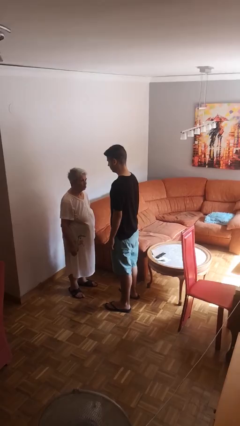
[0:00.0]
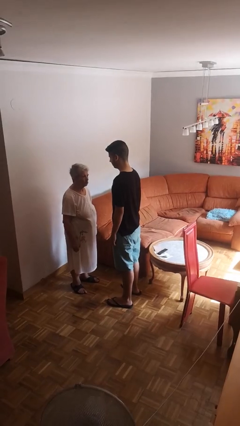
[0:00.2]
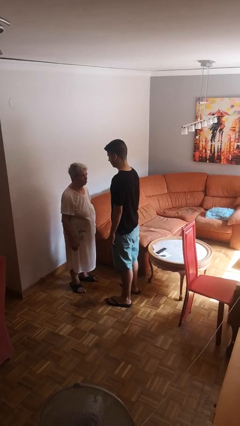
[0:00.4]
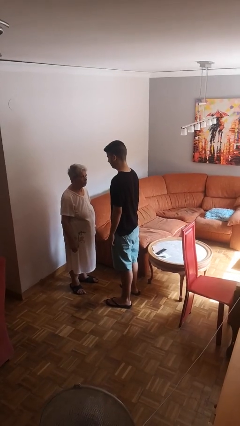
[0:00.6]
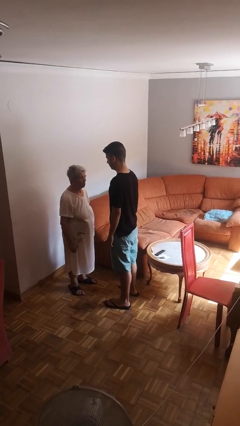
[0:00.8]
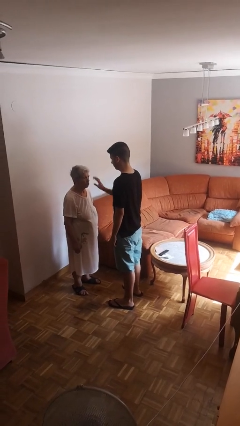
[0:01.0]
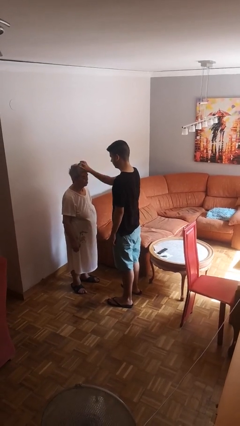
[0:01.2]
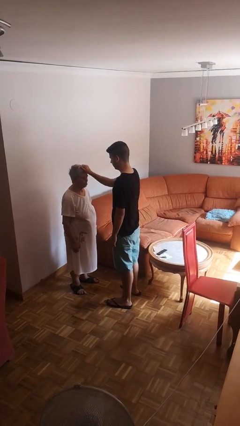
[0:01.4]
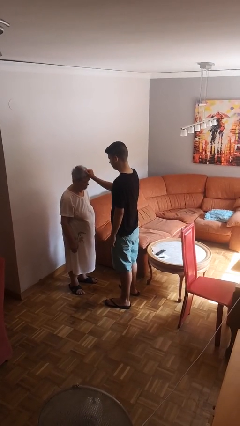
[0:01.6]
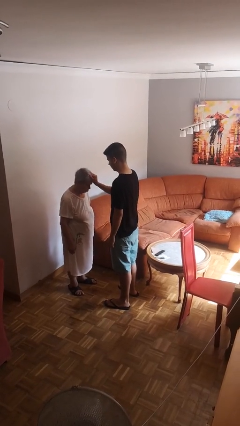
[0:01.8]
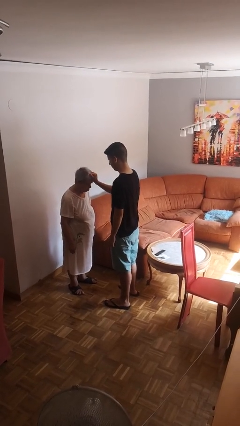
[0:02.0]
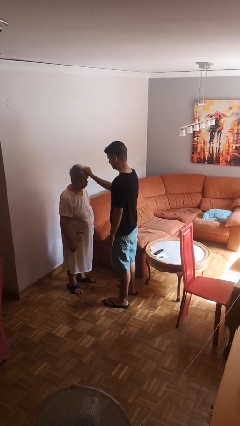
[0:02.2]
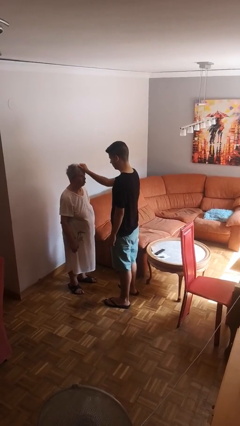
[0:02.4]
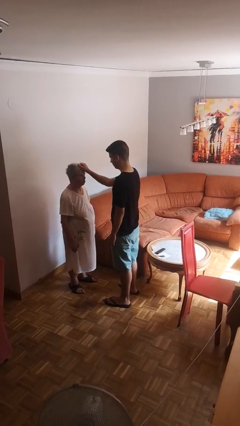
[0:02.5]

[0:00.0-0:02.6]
person grabs person by hair

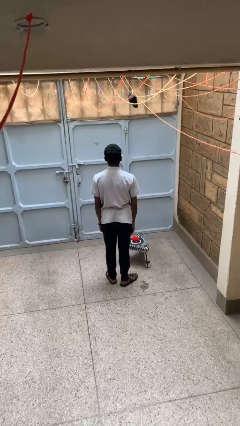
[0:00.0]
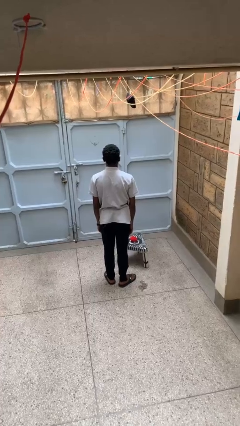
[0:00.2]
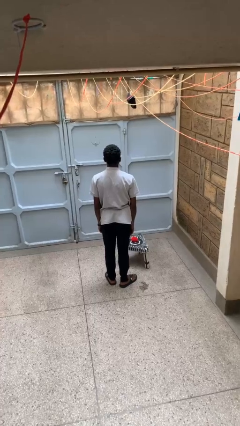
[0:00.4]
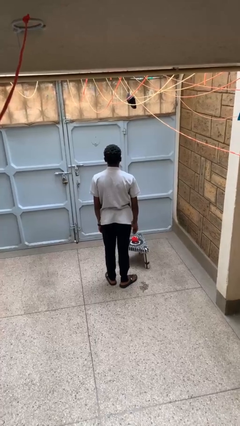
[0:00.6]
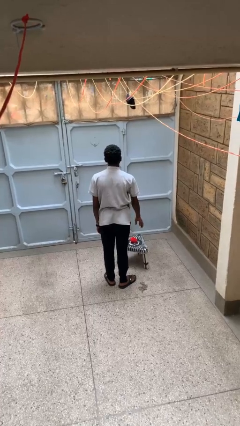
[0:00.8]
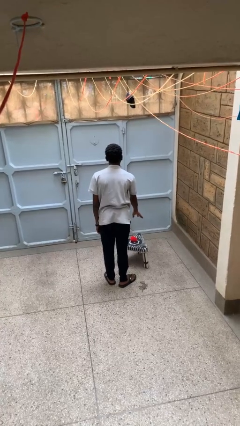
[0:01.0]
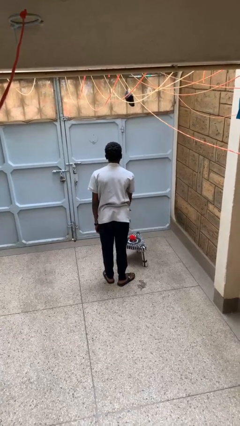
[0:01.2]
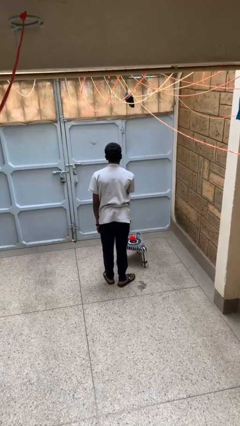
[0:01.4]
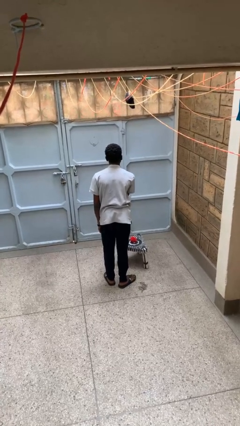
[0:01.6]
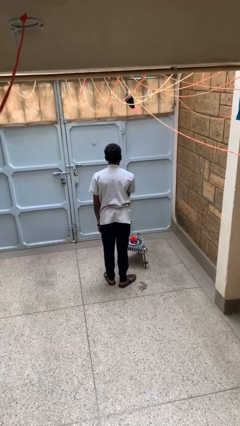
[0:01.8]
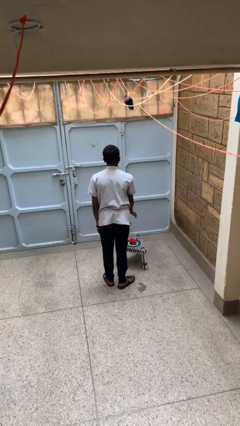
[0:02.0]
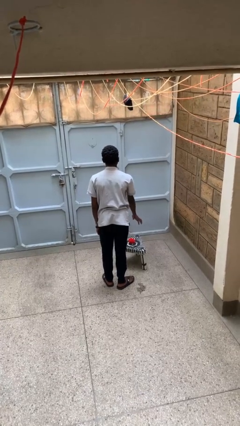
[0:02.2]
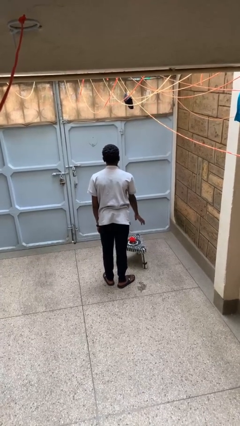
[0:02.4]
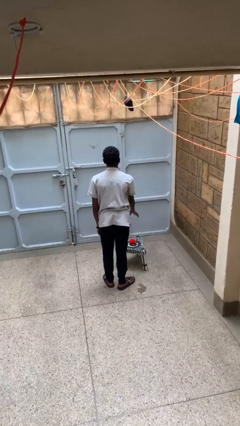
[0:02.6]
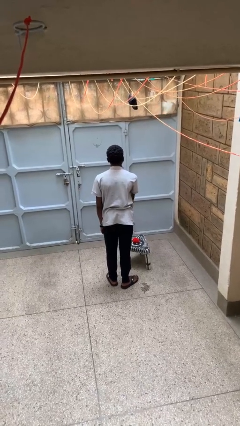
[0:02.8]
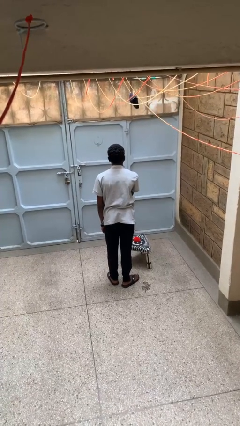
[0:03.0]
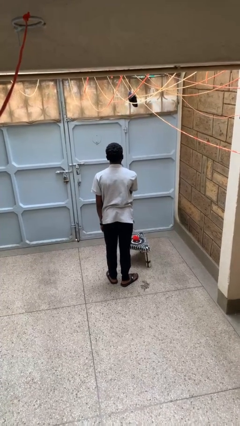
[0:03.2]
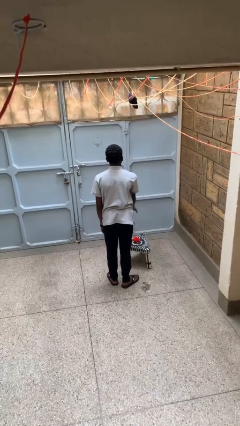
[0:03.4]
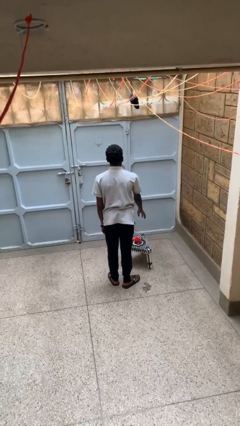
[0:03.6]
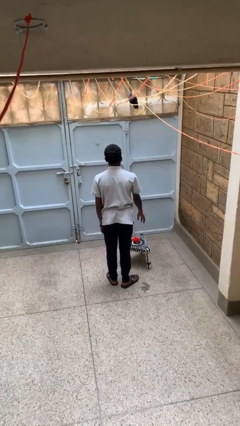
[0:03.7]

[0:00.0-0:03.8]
person waves hand over object

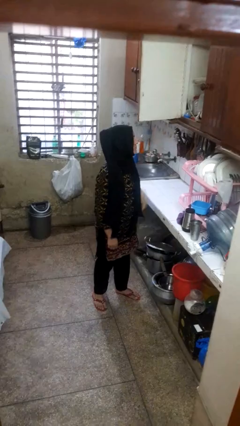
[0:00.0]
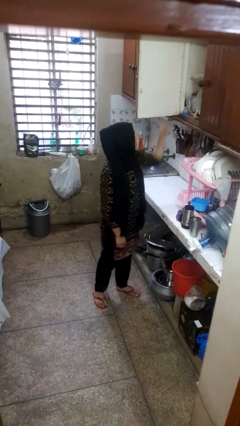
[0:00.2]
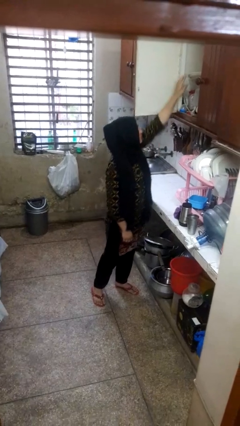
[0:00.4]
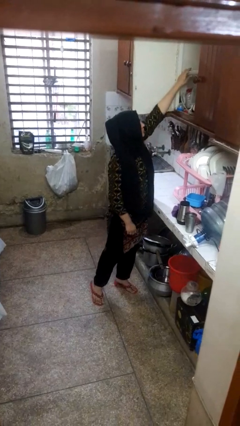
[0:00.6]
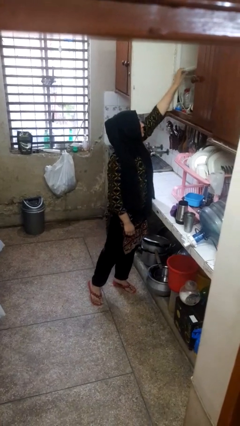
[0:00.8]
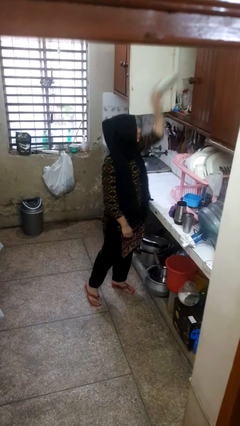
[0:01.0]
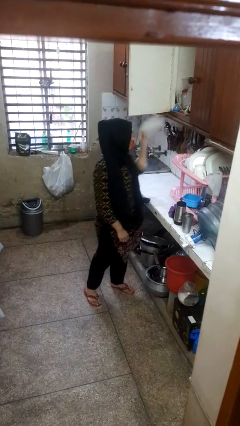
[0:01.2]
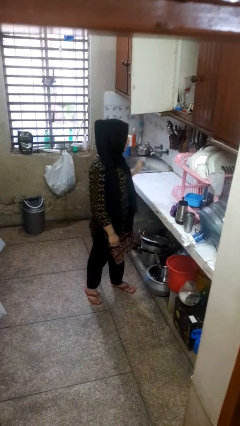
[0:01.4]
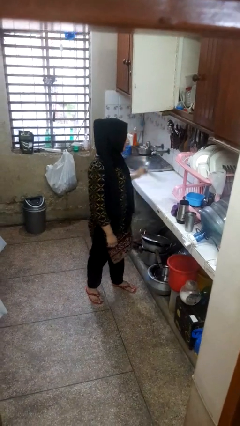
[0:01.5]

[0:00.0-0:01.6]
person takes object from cabinet

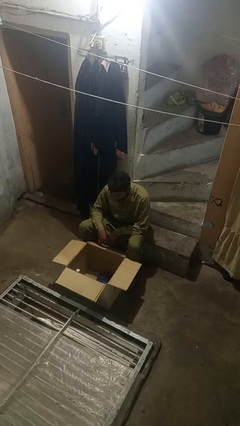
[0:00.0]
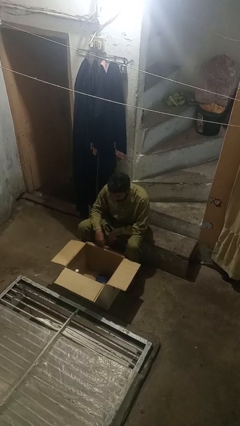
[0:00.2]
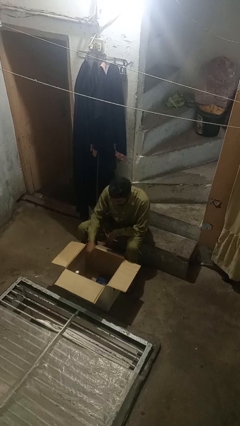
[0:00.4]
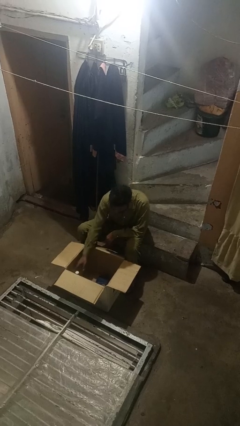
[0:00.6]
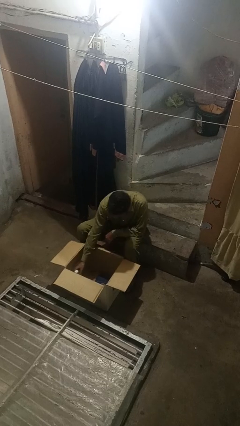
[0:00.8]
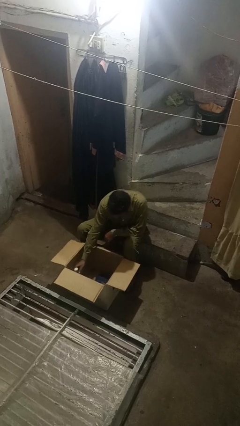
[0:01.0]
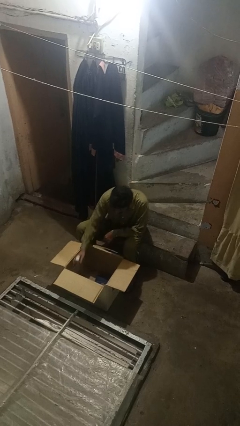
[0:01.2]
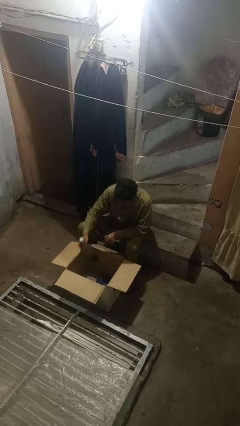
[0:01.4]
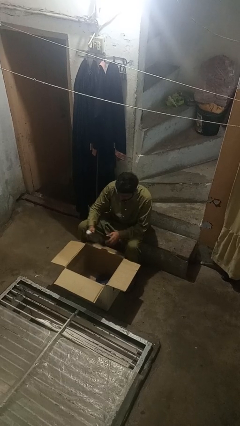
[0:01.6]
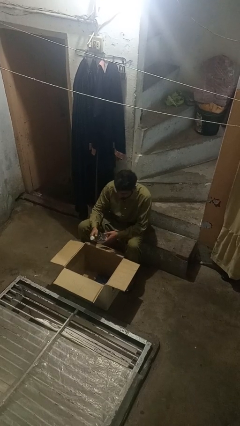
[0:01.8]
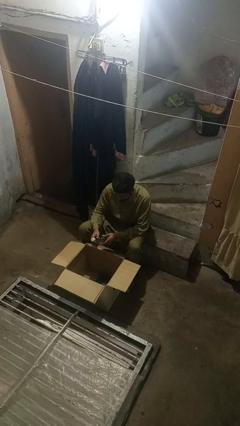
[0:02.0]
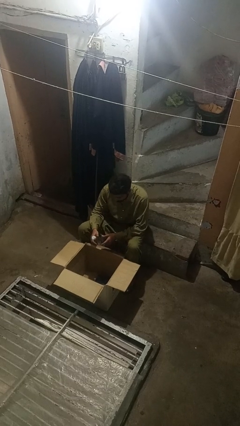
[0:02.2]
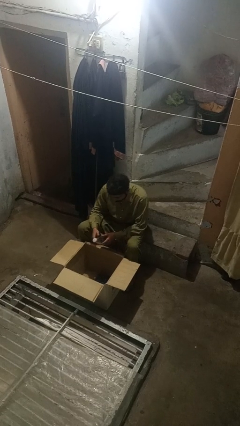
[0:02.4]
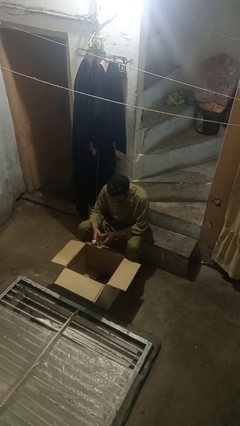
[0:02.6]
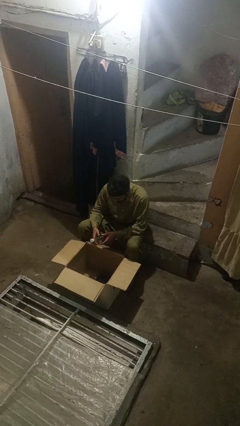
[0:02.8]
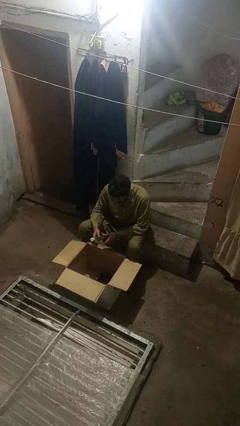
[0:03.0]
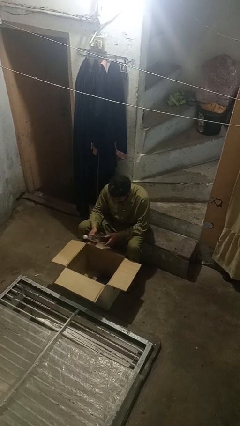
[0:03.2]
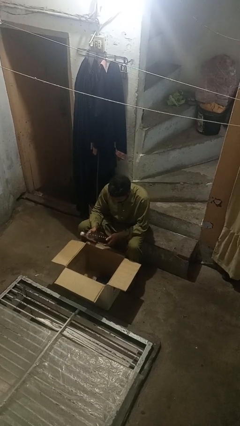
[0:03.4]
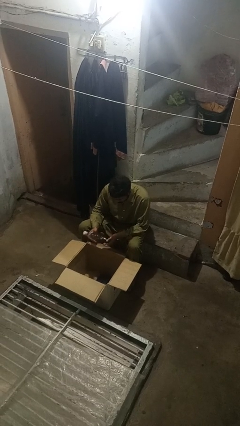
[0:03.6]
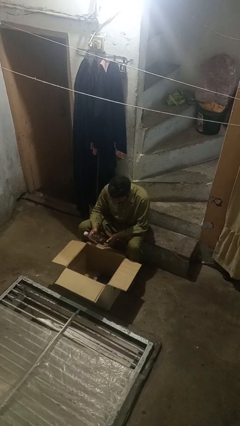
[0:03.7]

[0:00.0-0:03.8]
person takes object from box

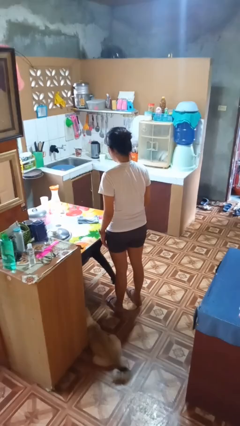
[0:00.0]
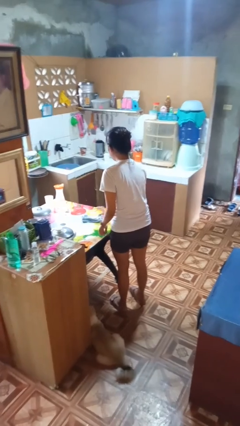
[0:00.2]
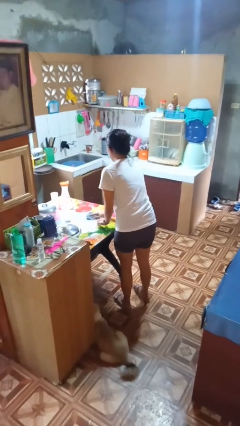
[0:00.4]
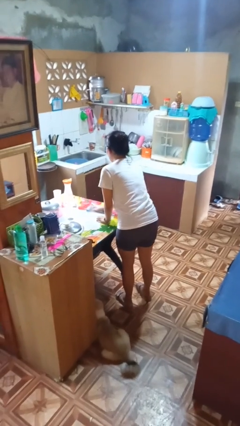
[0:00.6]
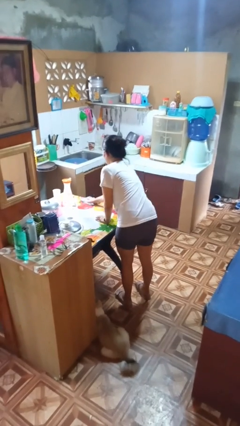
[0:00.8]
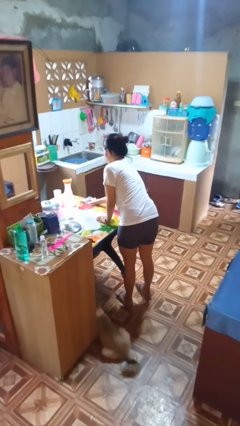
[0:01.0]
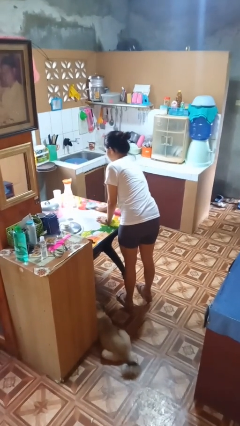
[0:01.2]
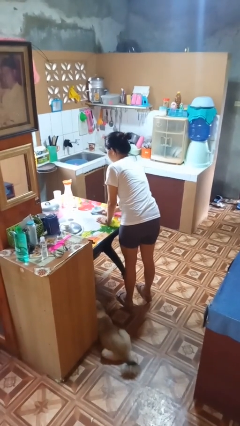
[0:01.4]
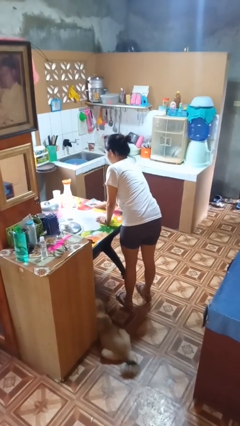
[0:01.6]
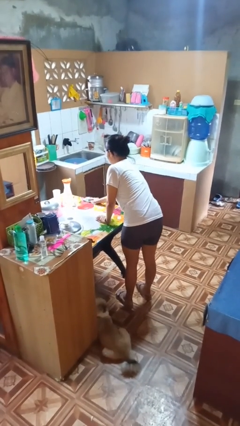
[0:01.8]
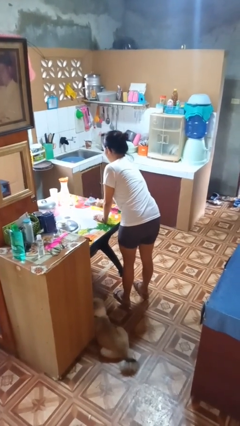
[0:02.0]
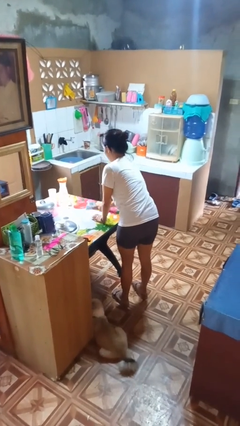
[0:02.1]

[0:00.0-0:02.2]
person cleans table with rag

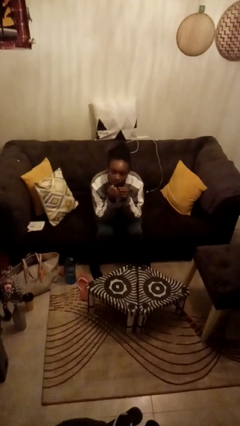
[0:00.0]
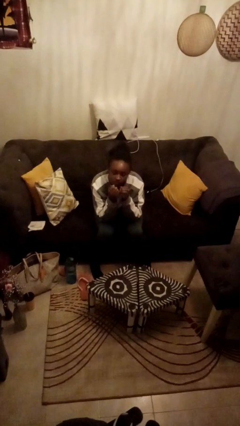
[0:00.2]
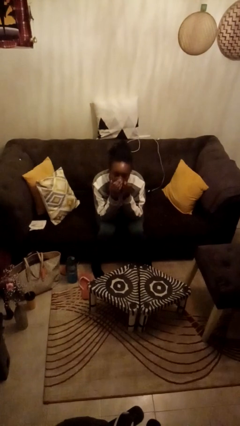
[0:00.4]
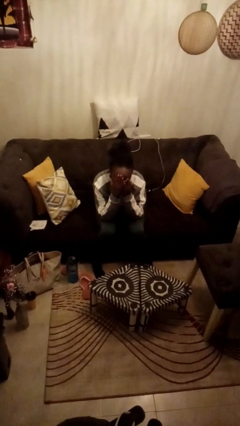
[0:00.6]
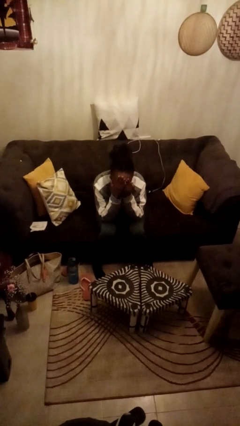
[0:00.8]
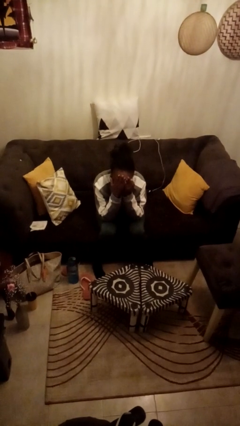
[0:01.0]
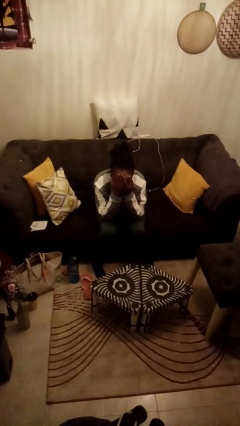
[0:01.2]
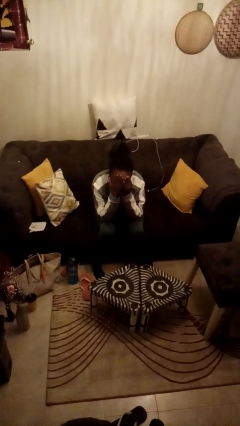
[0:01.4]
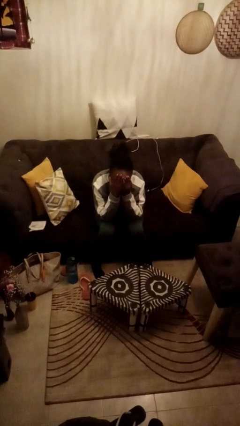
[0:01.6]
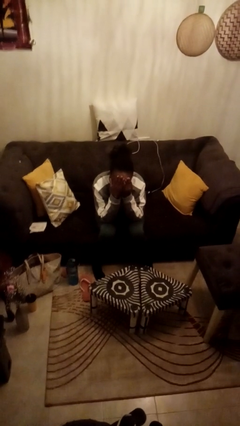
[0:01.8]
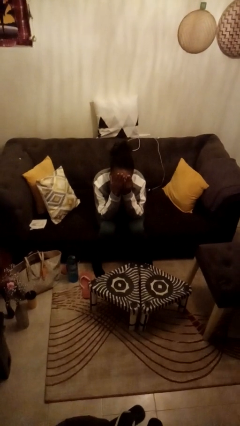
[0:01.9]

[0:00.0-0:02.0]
person covers face with hands

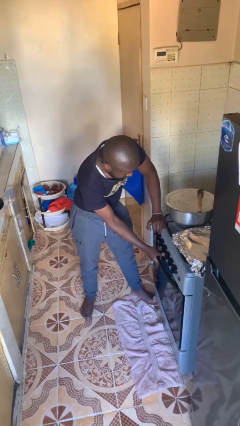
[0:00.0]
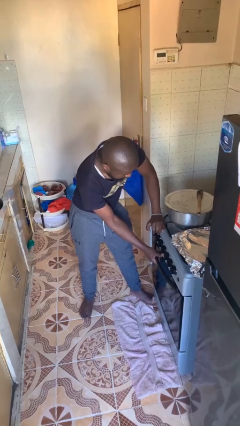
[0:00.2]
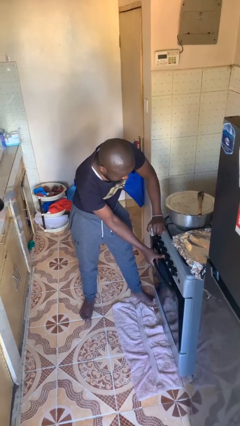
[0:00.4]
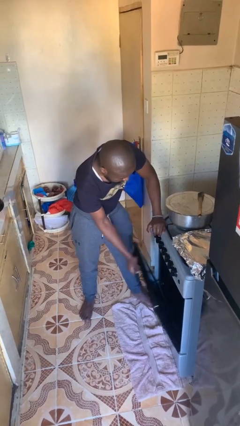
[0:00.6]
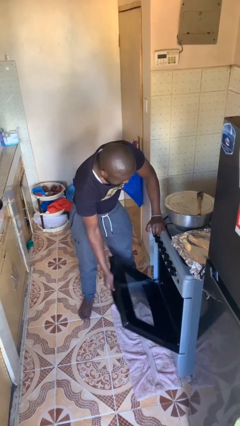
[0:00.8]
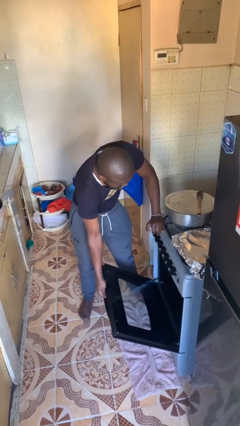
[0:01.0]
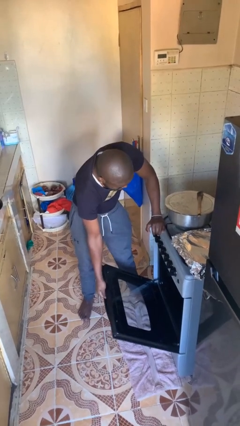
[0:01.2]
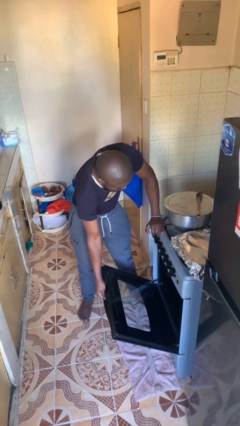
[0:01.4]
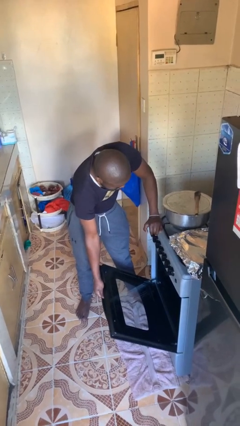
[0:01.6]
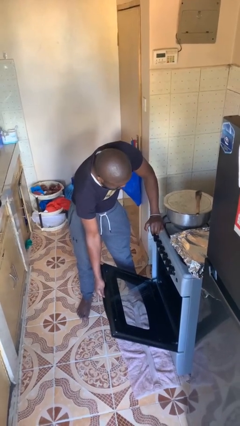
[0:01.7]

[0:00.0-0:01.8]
person opens oven door
